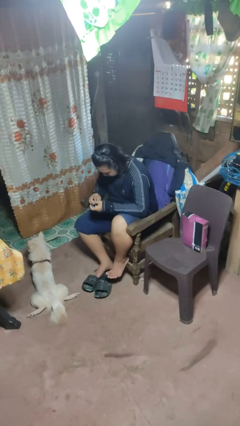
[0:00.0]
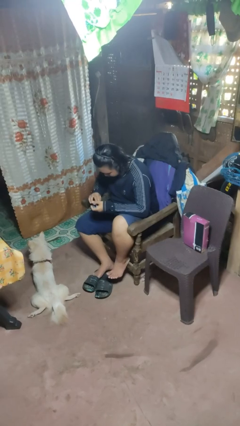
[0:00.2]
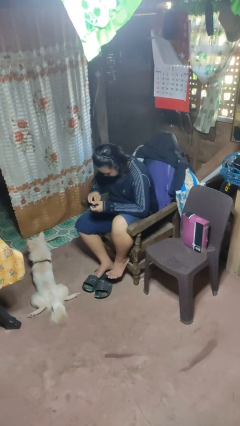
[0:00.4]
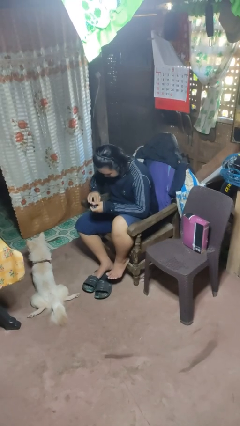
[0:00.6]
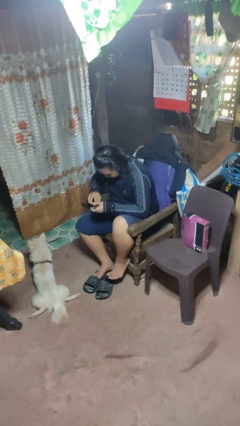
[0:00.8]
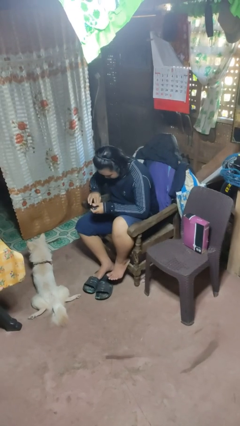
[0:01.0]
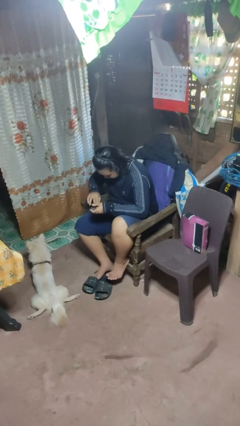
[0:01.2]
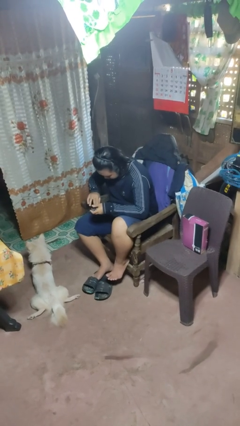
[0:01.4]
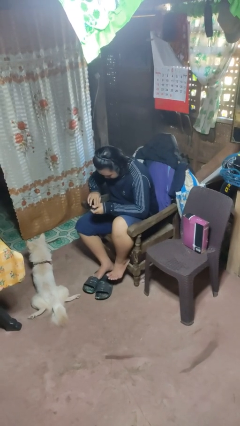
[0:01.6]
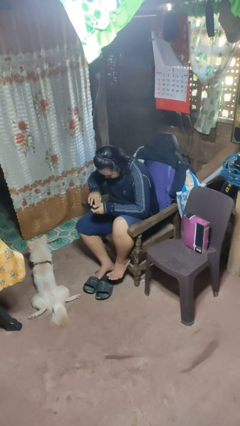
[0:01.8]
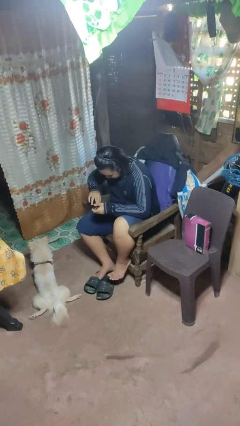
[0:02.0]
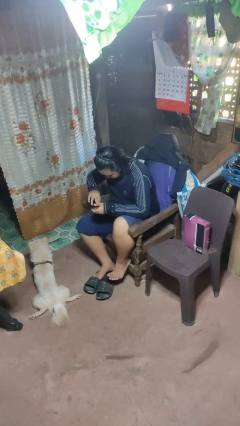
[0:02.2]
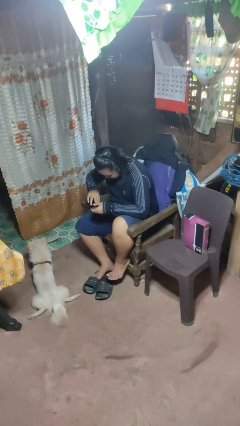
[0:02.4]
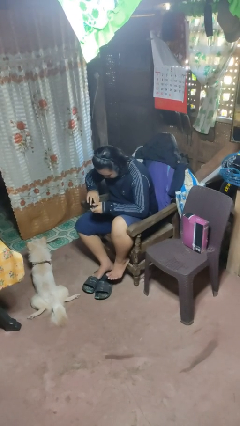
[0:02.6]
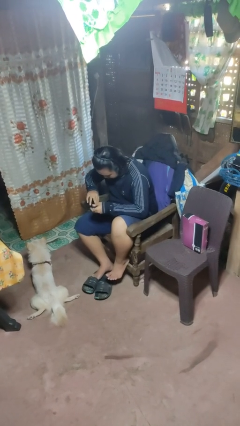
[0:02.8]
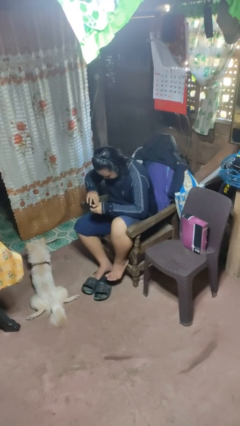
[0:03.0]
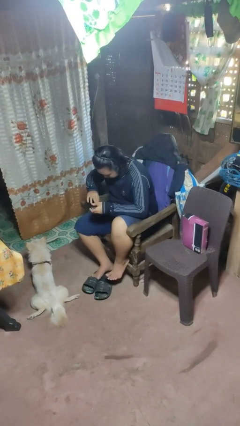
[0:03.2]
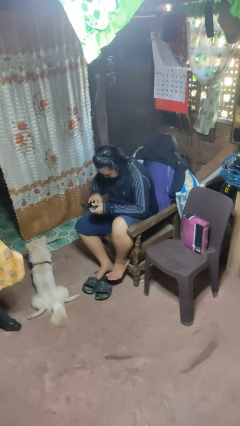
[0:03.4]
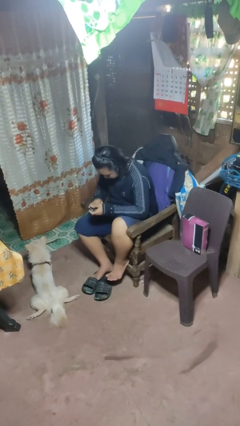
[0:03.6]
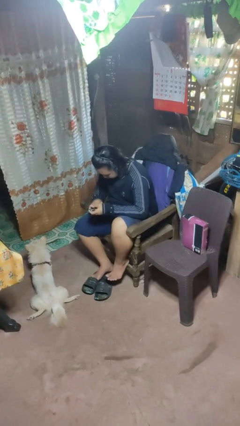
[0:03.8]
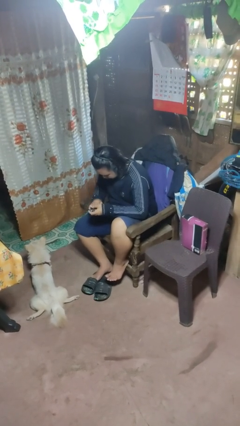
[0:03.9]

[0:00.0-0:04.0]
person clips fingernails

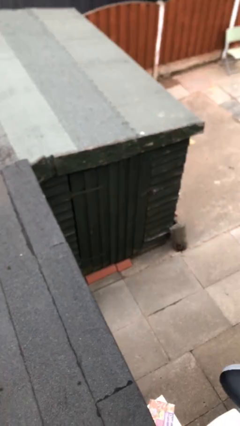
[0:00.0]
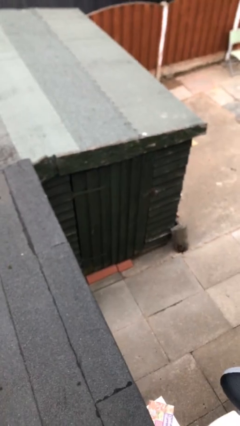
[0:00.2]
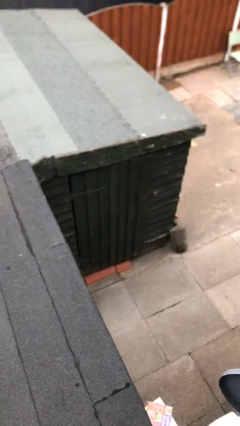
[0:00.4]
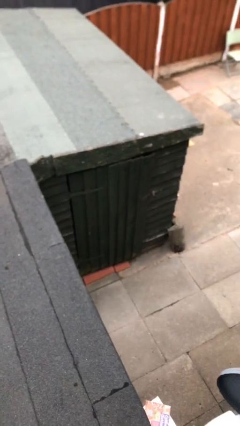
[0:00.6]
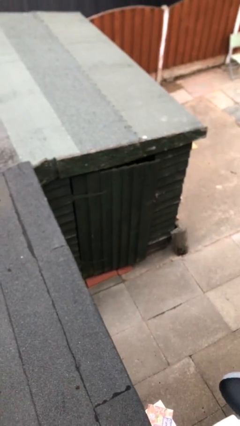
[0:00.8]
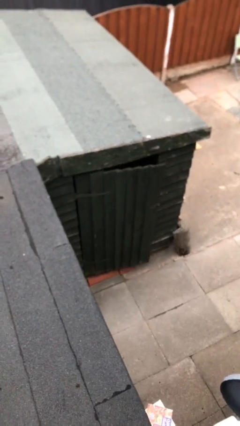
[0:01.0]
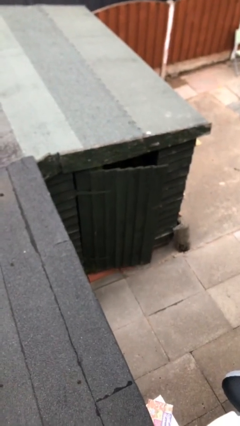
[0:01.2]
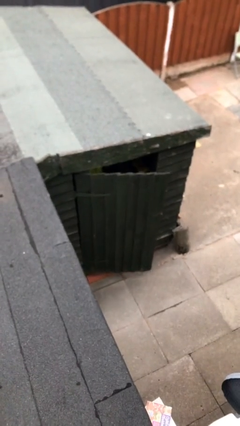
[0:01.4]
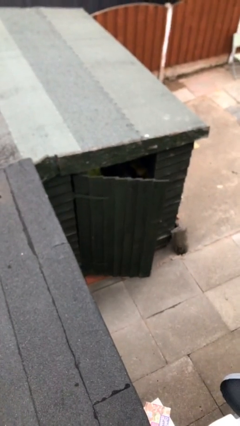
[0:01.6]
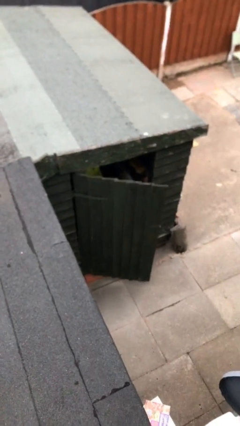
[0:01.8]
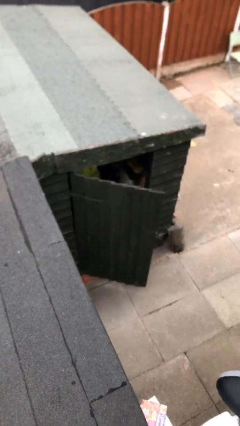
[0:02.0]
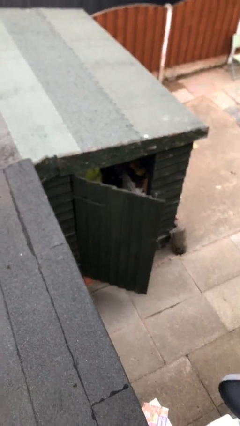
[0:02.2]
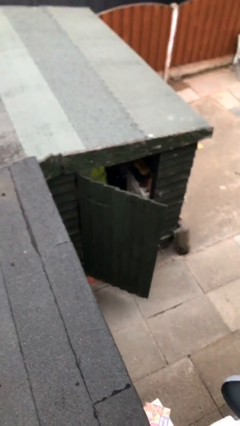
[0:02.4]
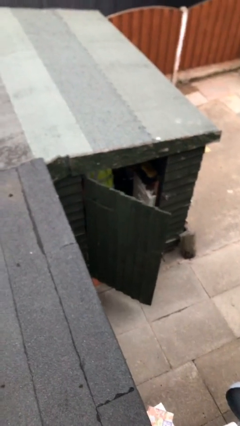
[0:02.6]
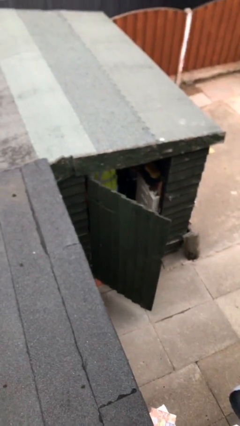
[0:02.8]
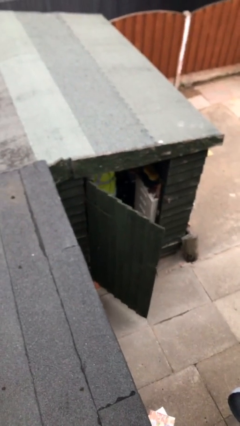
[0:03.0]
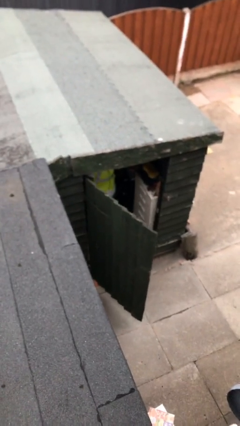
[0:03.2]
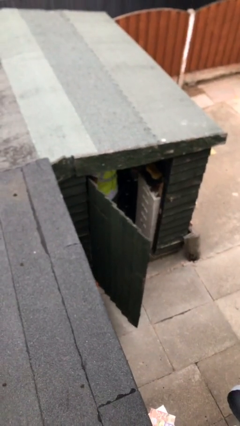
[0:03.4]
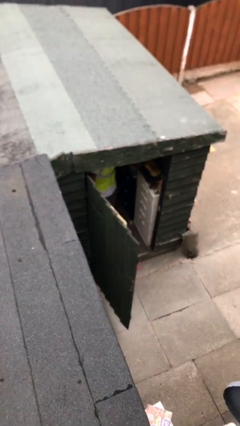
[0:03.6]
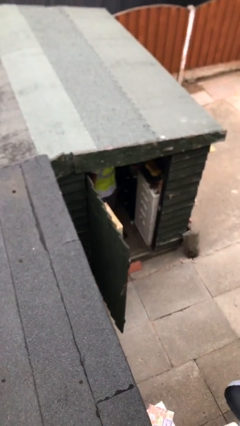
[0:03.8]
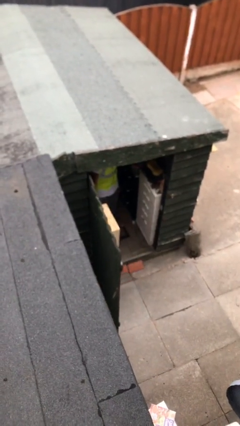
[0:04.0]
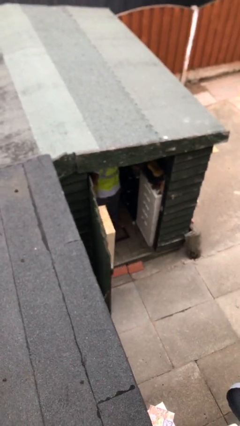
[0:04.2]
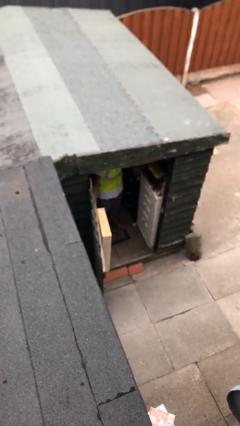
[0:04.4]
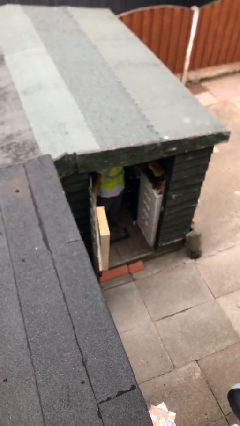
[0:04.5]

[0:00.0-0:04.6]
person opens facility door

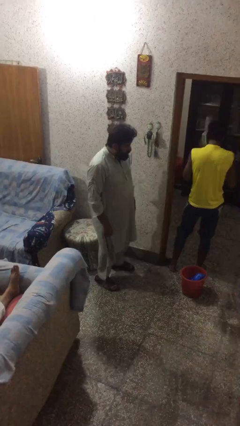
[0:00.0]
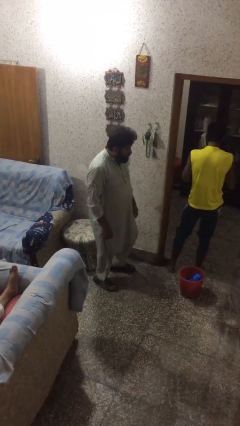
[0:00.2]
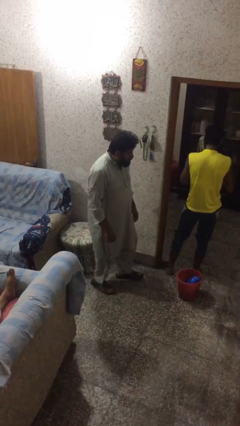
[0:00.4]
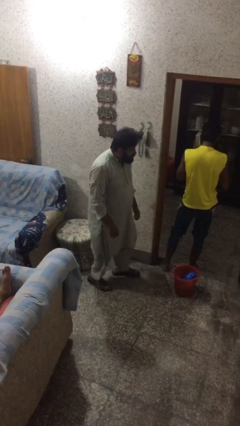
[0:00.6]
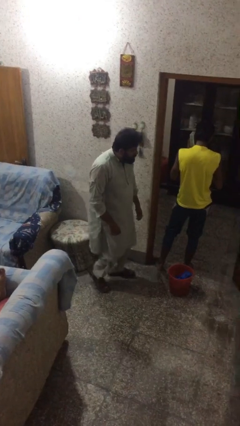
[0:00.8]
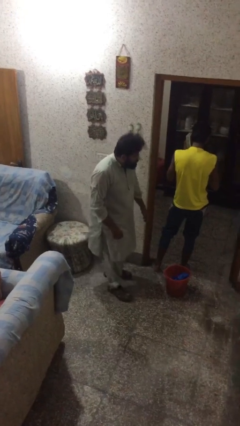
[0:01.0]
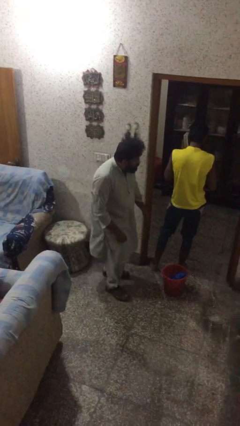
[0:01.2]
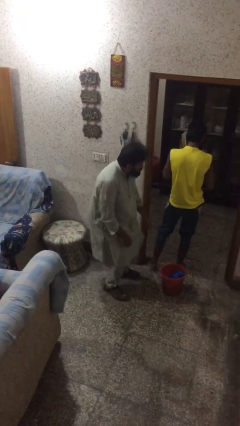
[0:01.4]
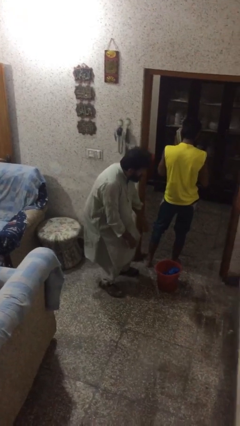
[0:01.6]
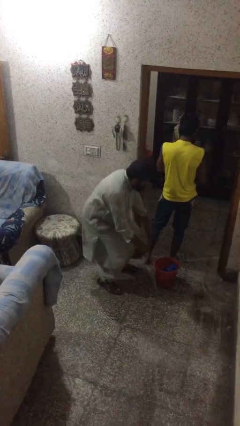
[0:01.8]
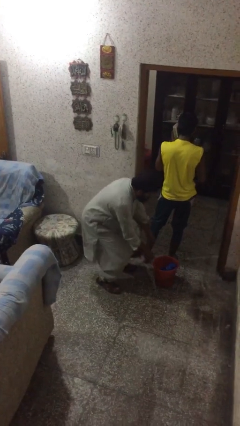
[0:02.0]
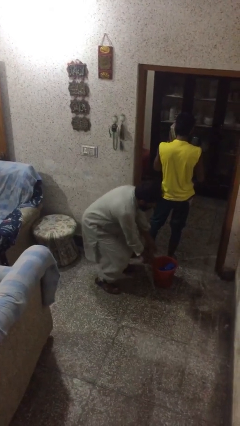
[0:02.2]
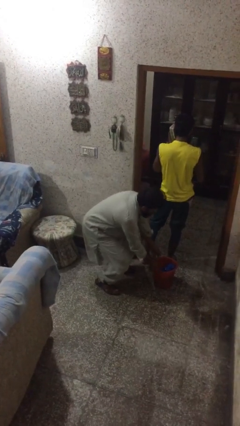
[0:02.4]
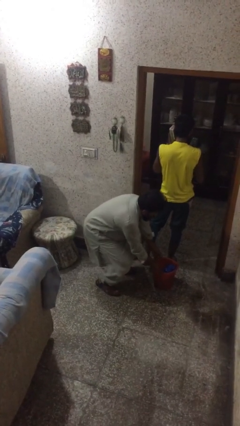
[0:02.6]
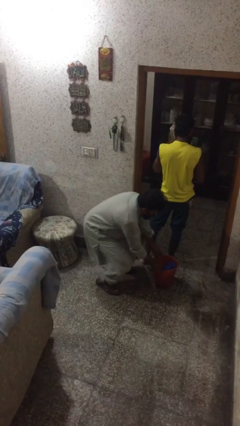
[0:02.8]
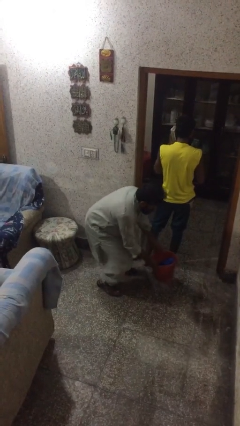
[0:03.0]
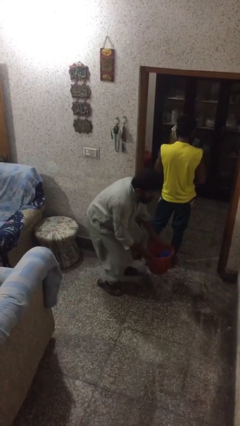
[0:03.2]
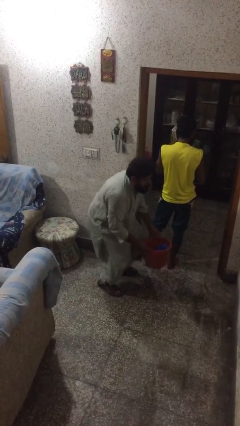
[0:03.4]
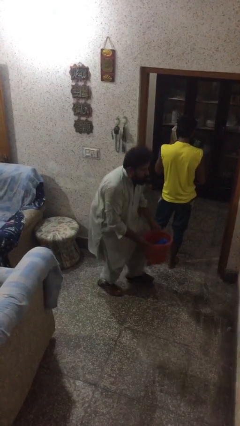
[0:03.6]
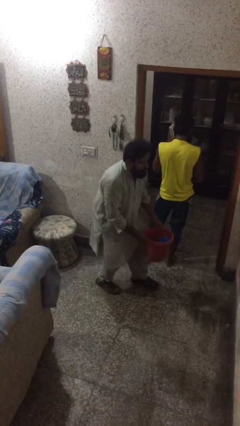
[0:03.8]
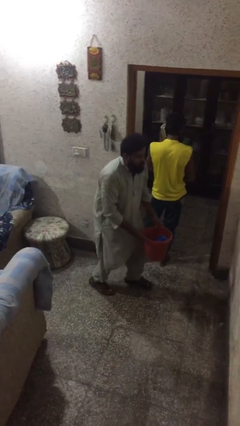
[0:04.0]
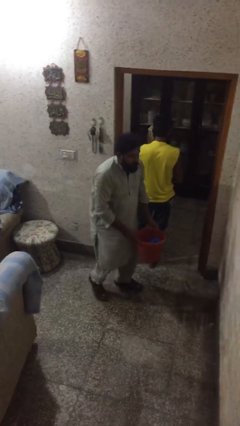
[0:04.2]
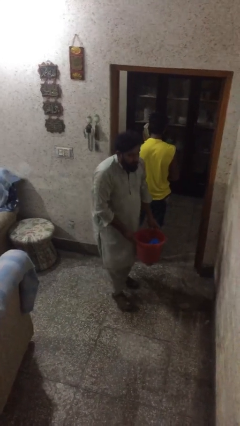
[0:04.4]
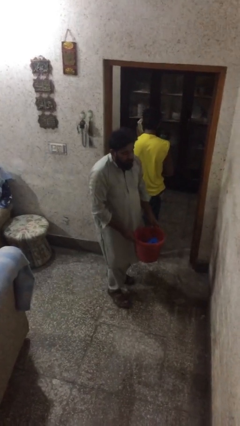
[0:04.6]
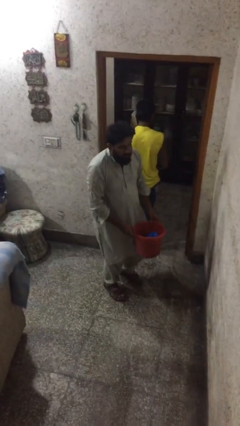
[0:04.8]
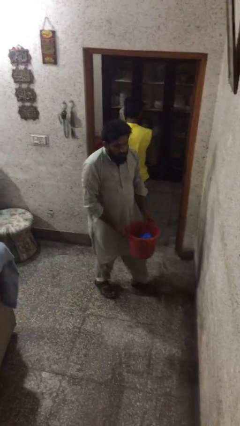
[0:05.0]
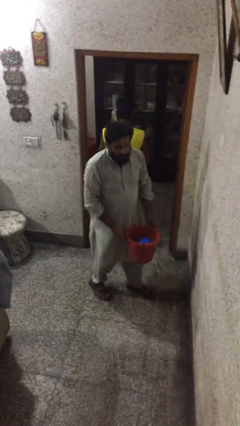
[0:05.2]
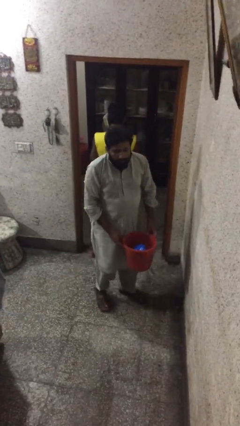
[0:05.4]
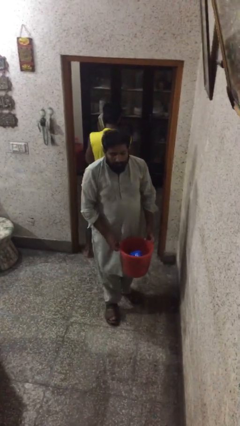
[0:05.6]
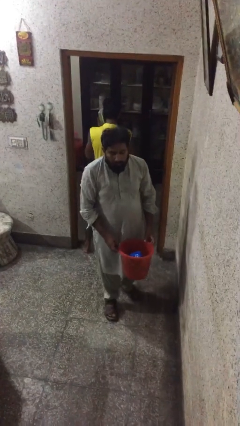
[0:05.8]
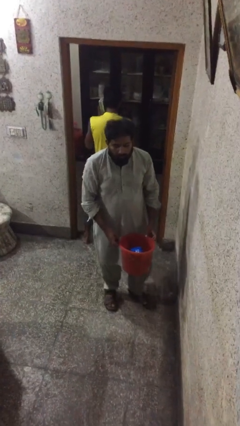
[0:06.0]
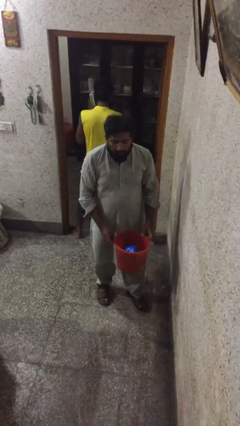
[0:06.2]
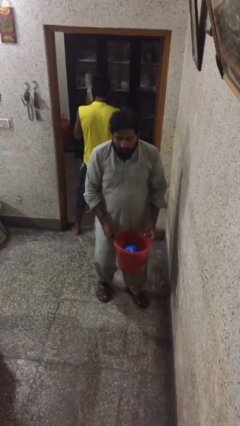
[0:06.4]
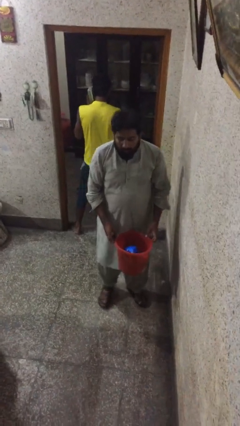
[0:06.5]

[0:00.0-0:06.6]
person steals object from person

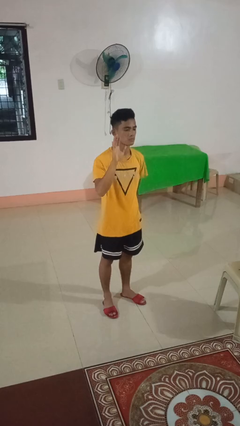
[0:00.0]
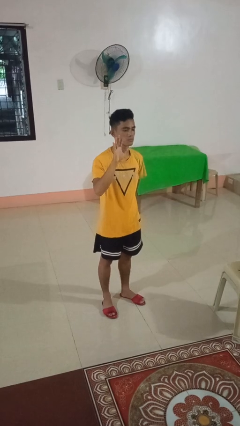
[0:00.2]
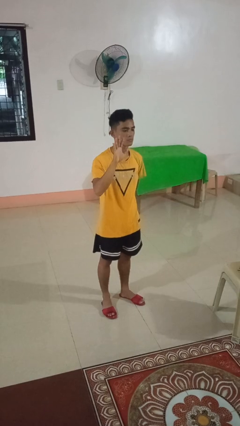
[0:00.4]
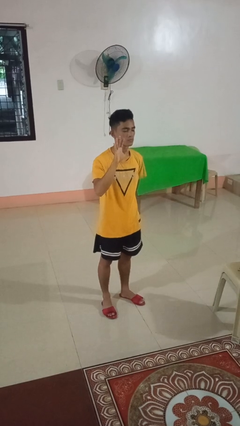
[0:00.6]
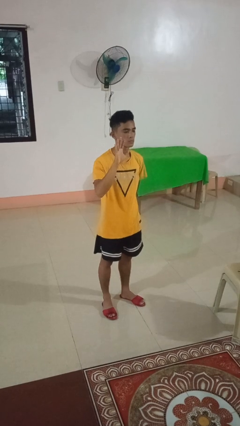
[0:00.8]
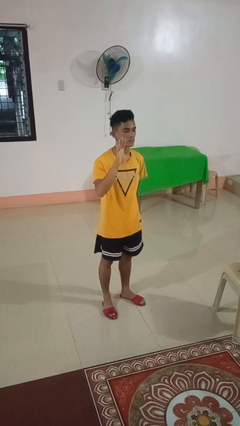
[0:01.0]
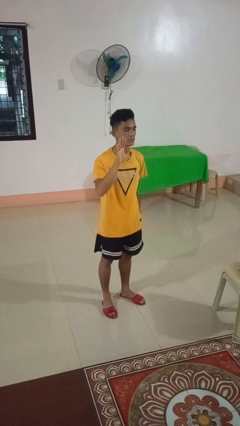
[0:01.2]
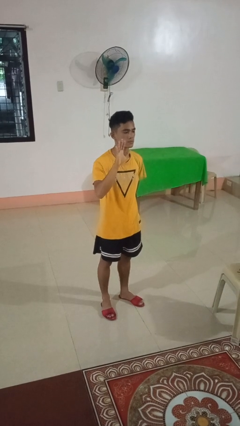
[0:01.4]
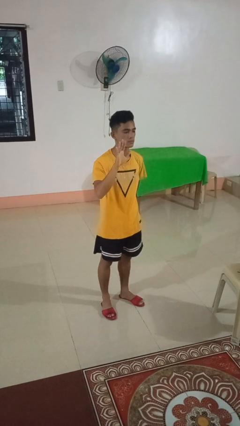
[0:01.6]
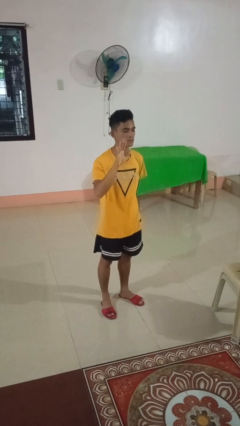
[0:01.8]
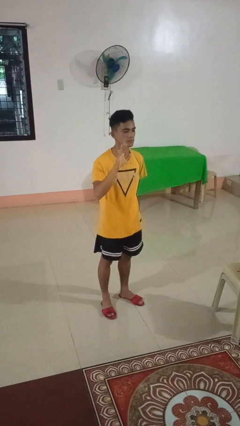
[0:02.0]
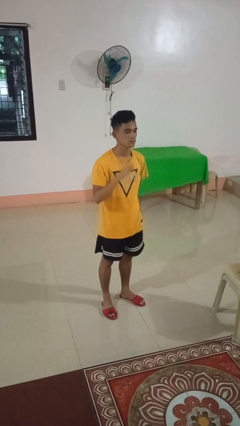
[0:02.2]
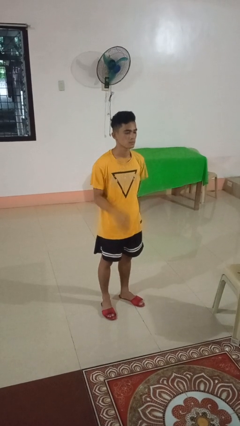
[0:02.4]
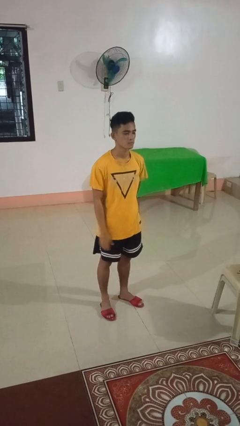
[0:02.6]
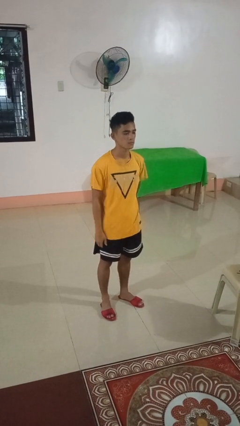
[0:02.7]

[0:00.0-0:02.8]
person gestures number five
